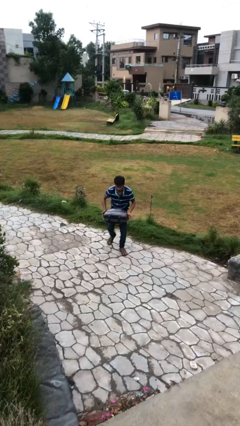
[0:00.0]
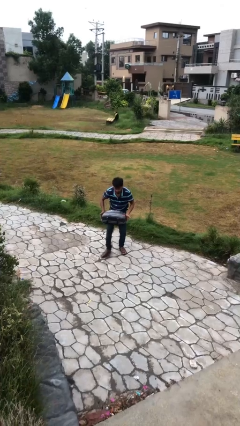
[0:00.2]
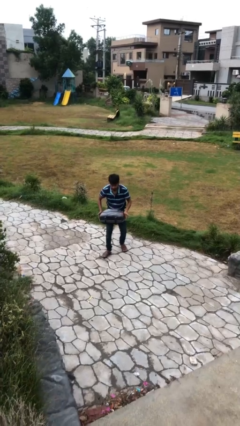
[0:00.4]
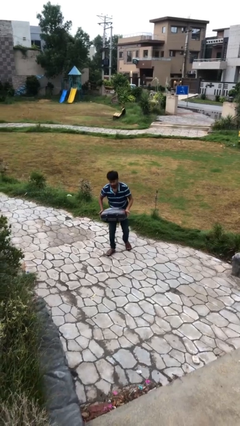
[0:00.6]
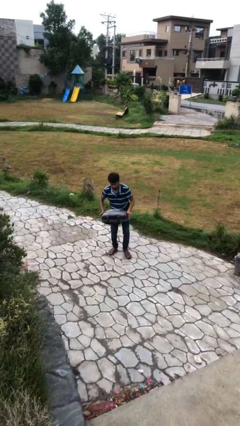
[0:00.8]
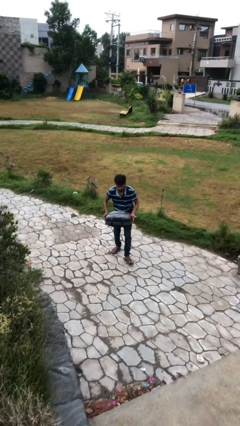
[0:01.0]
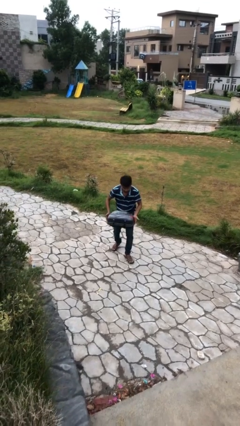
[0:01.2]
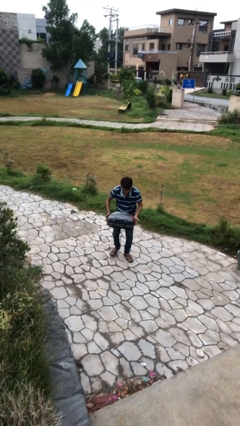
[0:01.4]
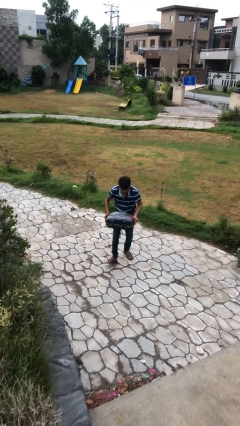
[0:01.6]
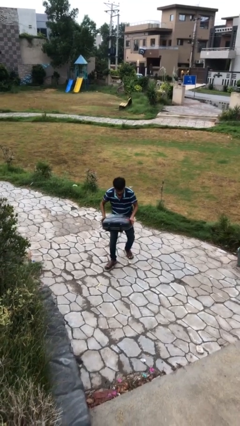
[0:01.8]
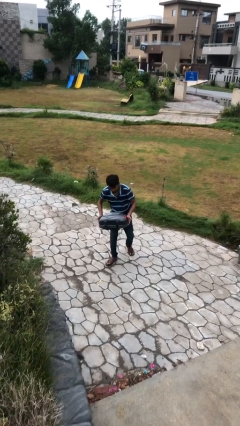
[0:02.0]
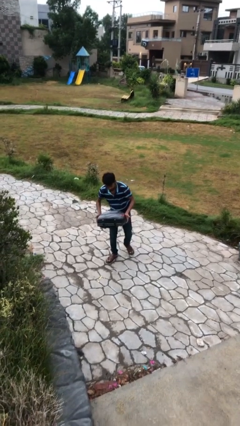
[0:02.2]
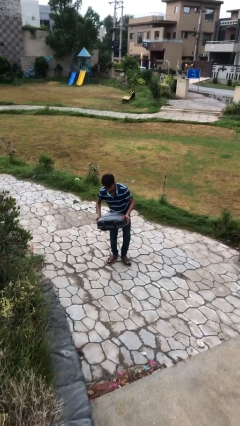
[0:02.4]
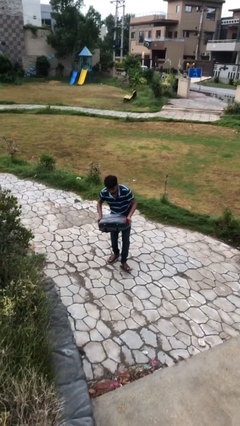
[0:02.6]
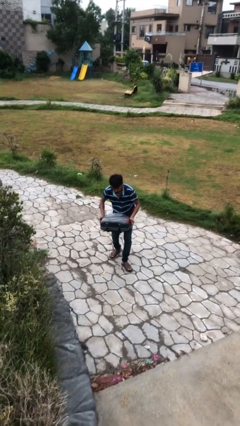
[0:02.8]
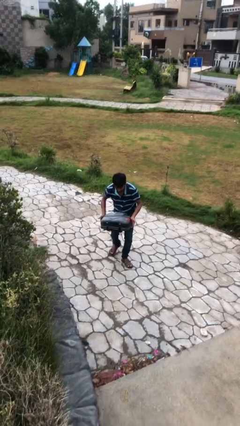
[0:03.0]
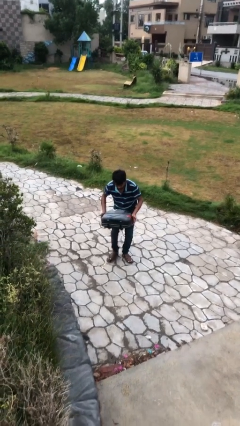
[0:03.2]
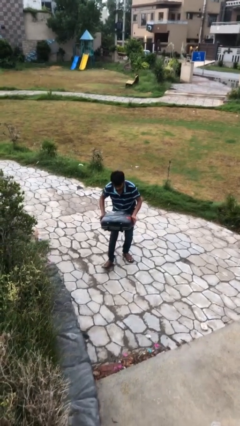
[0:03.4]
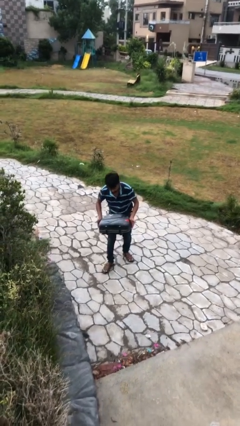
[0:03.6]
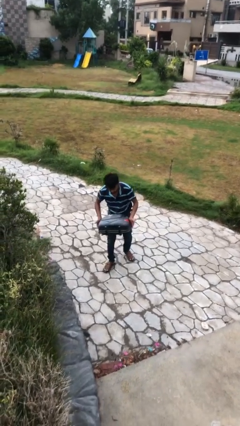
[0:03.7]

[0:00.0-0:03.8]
person carries heavy object

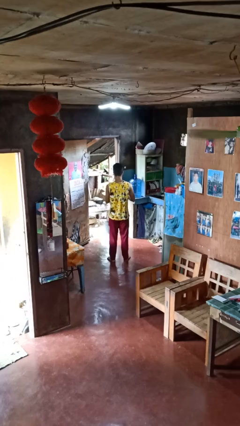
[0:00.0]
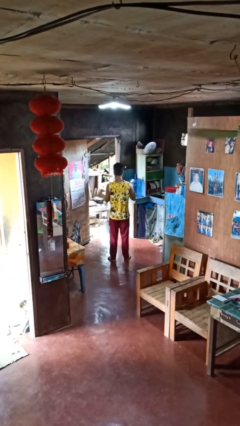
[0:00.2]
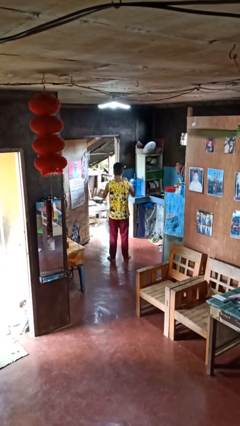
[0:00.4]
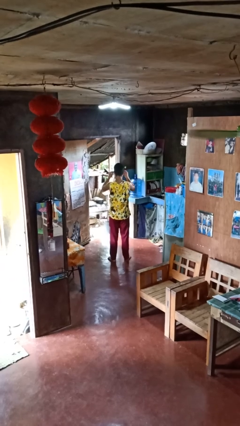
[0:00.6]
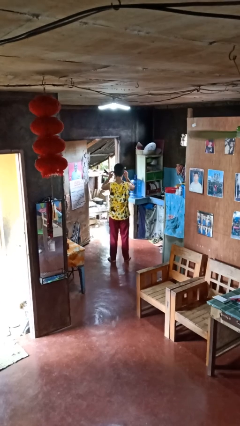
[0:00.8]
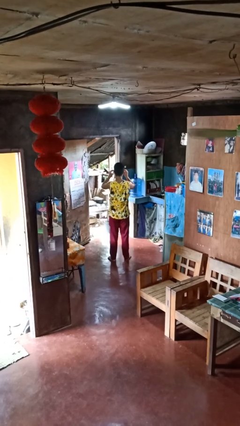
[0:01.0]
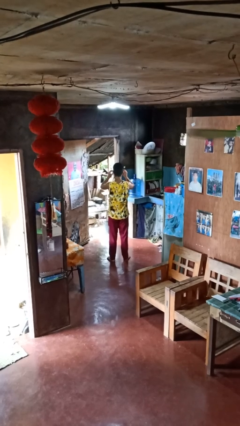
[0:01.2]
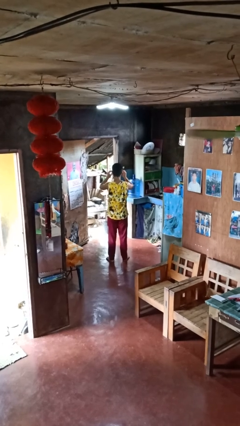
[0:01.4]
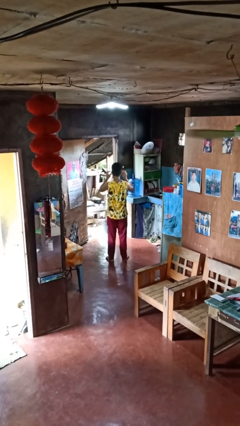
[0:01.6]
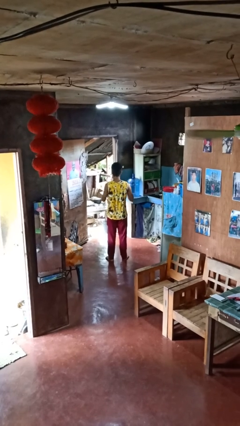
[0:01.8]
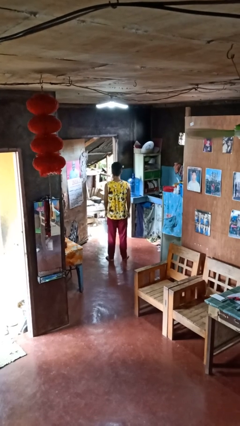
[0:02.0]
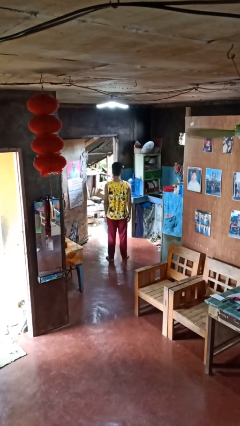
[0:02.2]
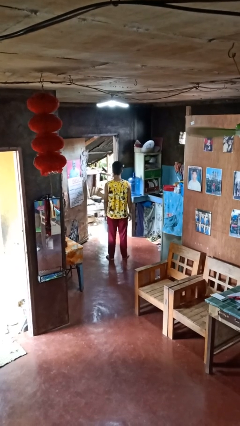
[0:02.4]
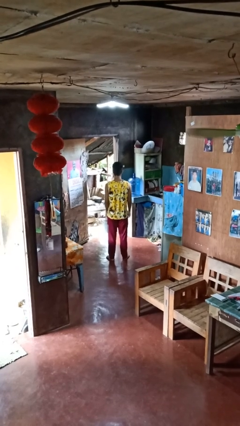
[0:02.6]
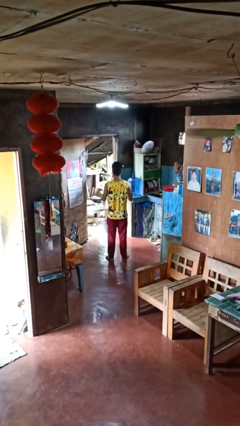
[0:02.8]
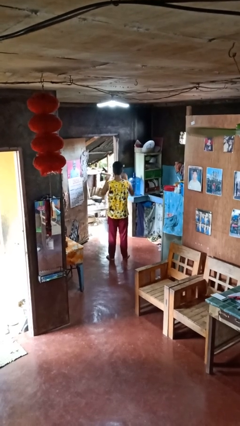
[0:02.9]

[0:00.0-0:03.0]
person puts on glasses

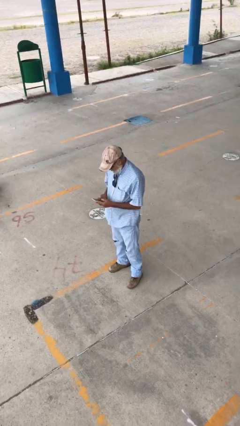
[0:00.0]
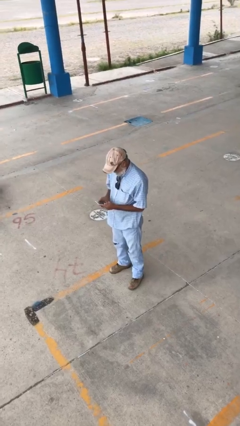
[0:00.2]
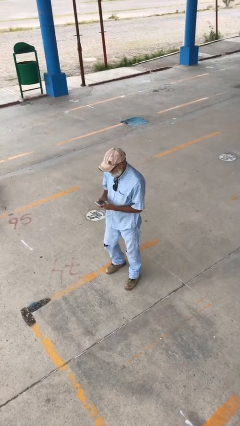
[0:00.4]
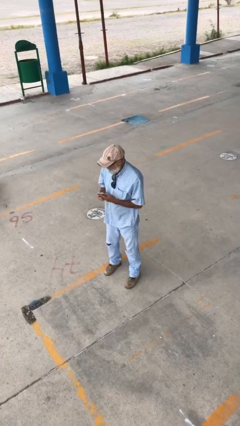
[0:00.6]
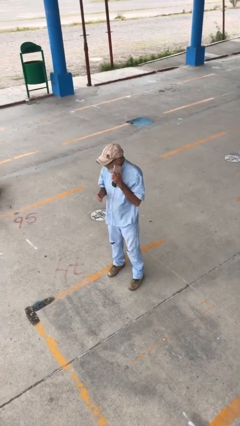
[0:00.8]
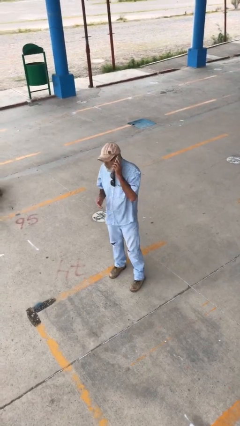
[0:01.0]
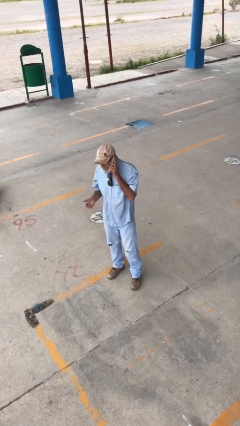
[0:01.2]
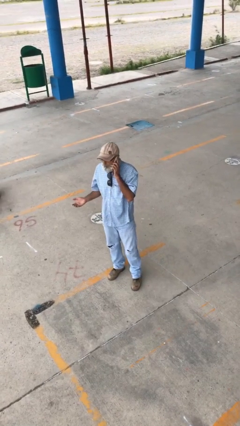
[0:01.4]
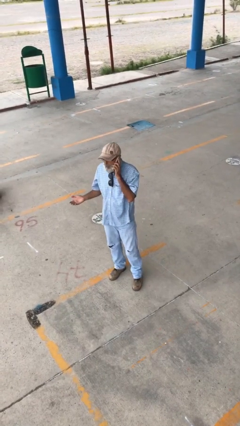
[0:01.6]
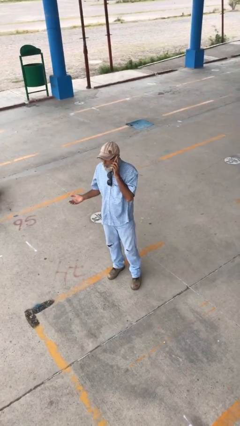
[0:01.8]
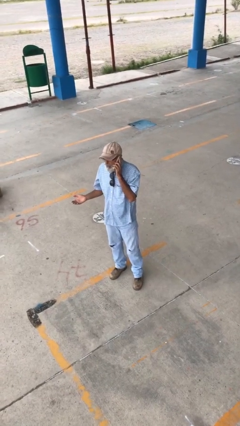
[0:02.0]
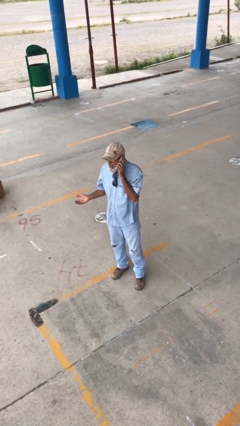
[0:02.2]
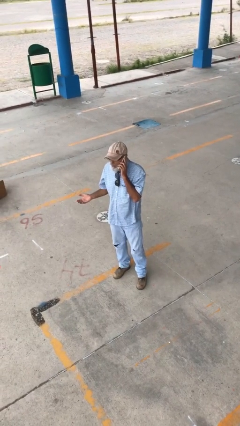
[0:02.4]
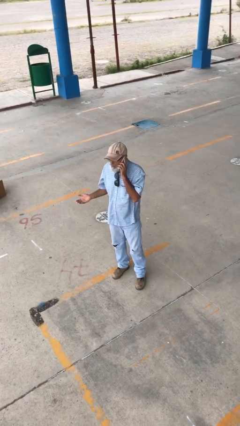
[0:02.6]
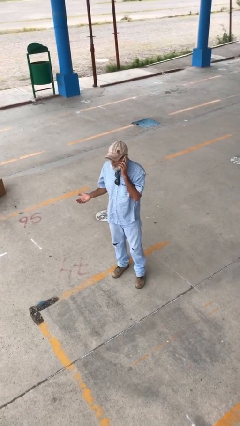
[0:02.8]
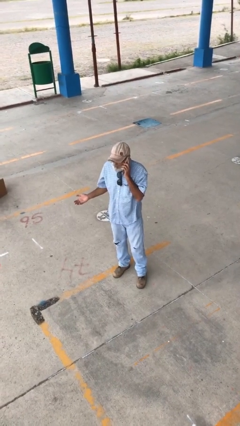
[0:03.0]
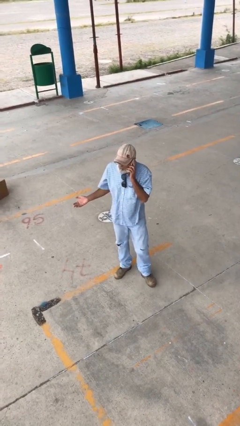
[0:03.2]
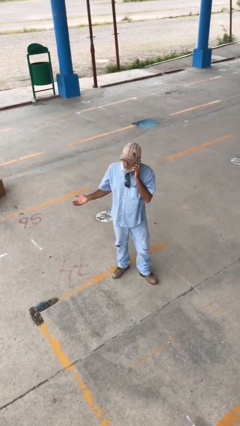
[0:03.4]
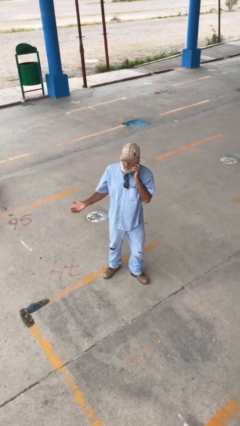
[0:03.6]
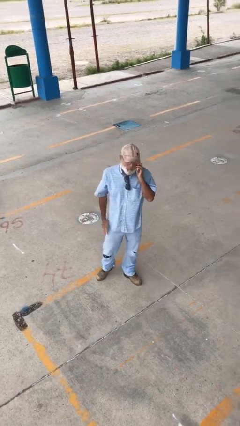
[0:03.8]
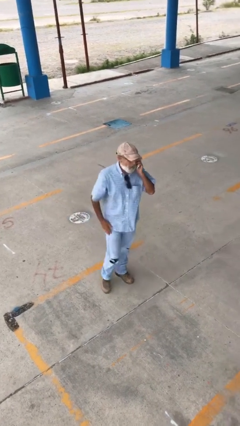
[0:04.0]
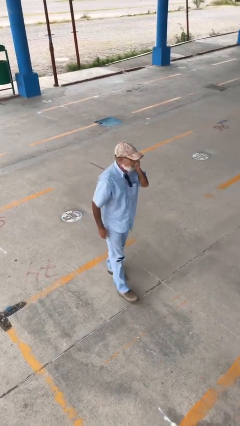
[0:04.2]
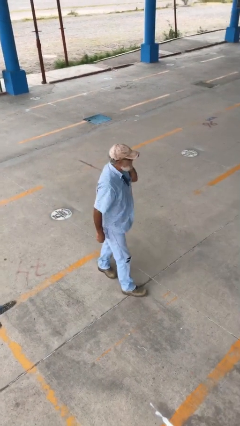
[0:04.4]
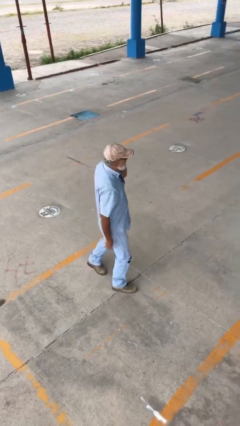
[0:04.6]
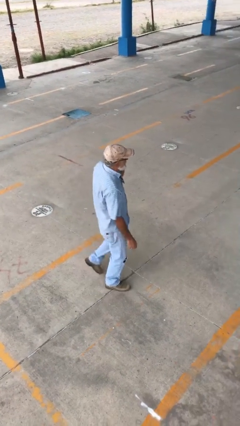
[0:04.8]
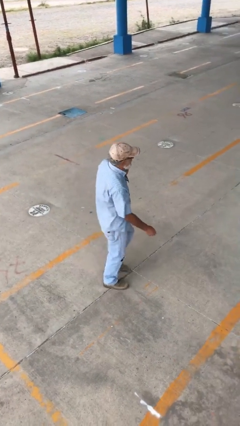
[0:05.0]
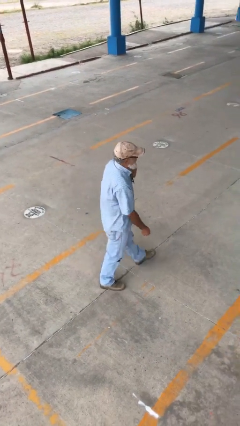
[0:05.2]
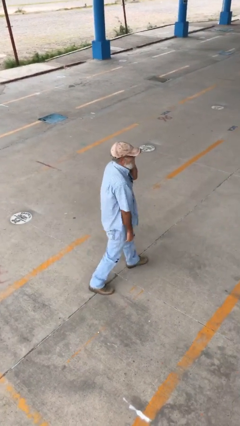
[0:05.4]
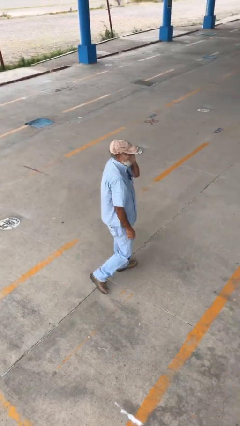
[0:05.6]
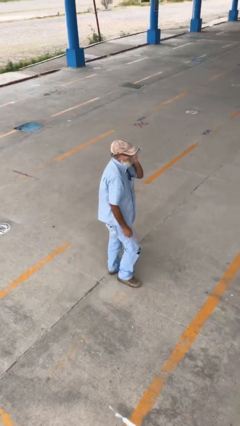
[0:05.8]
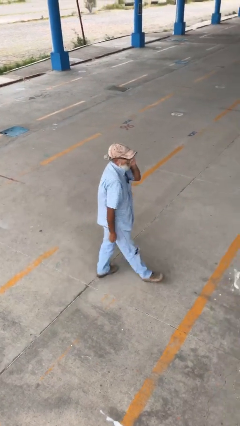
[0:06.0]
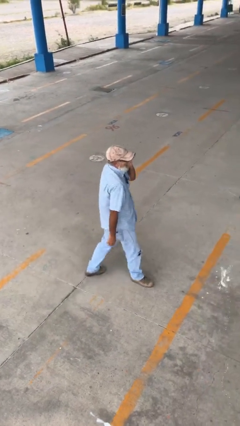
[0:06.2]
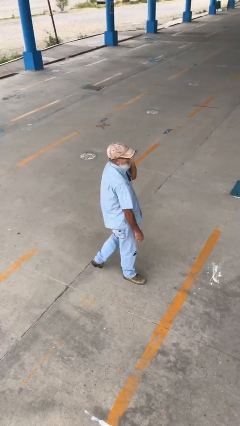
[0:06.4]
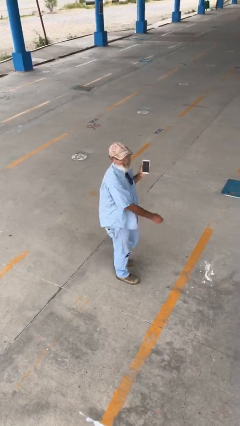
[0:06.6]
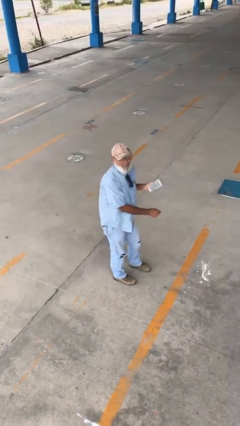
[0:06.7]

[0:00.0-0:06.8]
person talks on phone

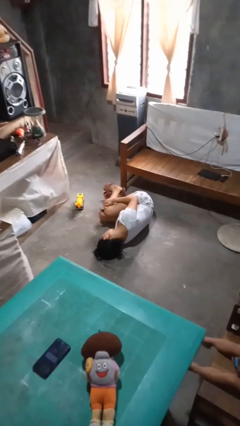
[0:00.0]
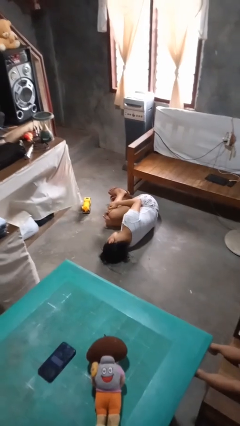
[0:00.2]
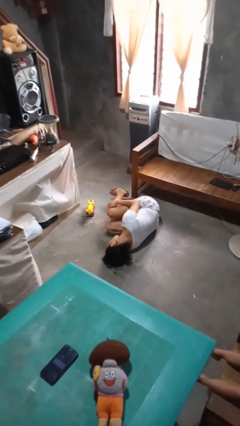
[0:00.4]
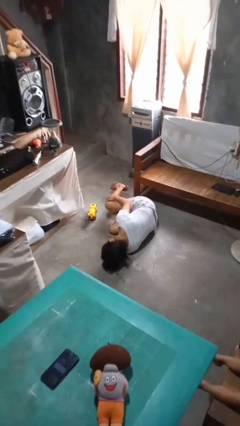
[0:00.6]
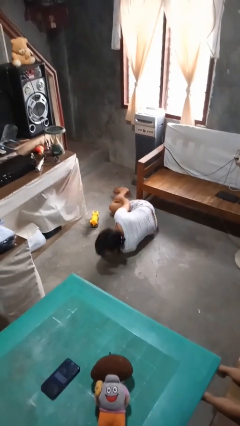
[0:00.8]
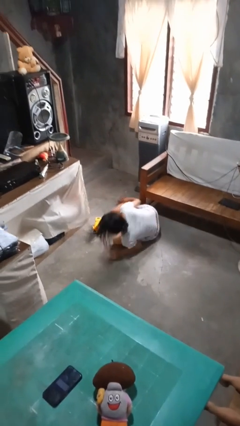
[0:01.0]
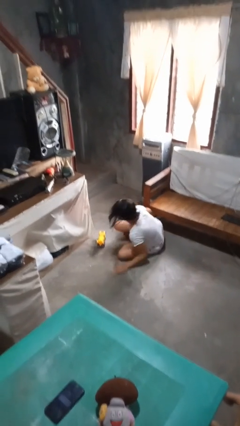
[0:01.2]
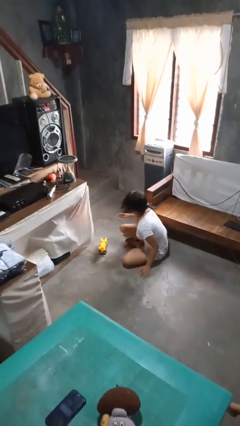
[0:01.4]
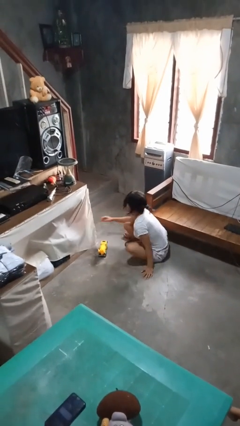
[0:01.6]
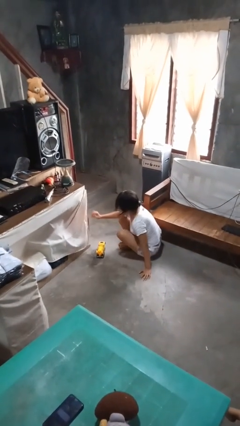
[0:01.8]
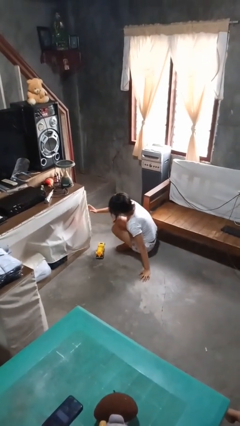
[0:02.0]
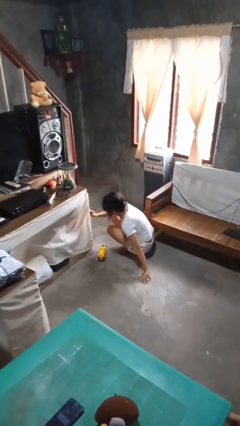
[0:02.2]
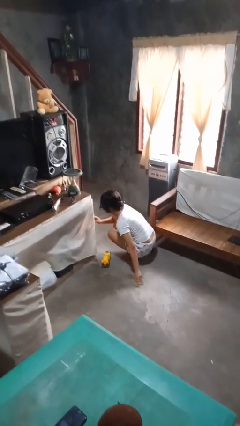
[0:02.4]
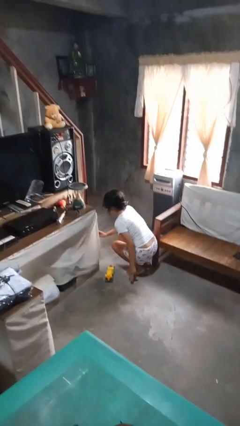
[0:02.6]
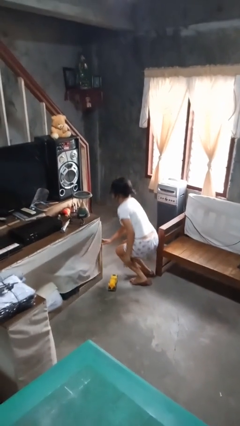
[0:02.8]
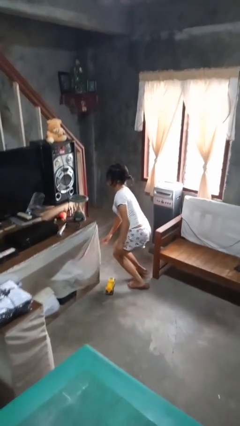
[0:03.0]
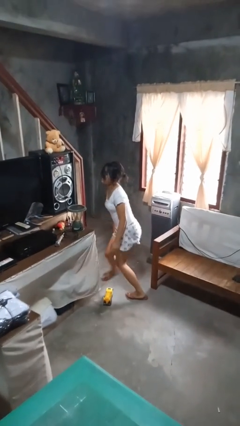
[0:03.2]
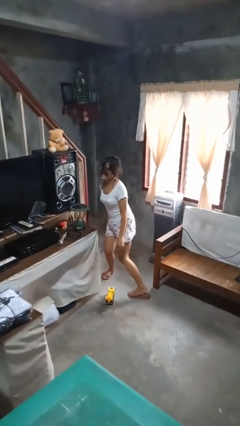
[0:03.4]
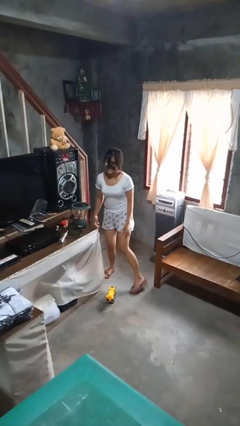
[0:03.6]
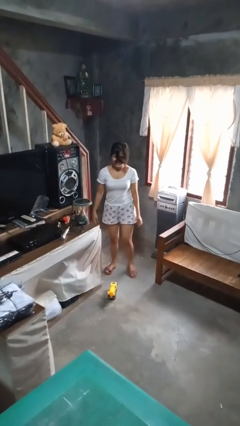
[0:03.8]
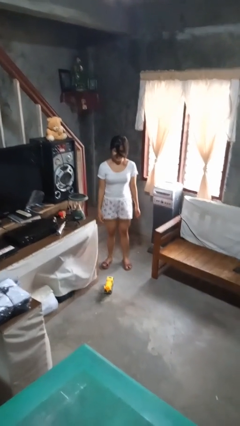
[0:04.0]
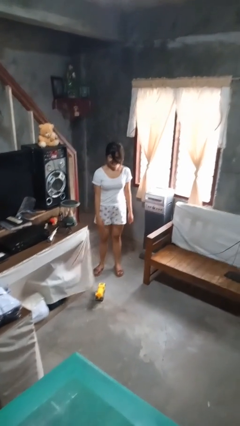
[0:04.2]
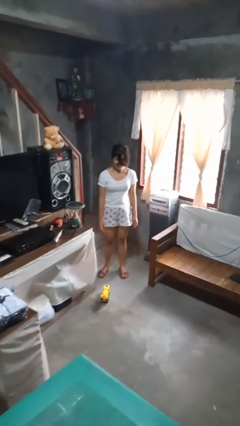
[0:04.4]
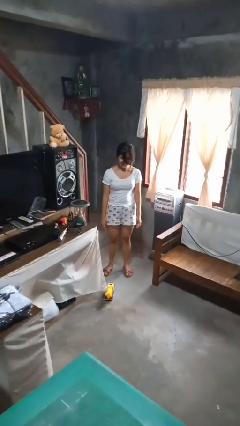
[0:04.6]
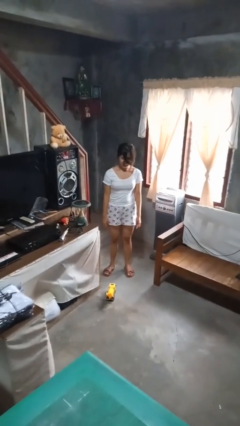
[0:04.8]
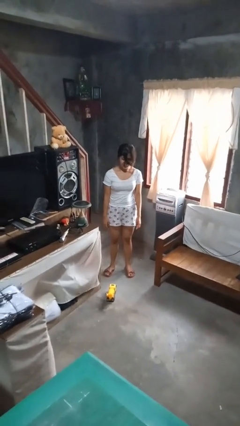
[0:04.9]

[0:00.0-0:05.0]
person stands up from floor
